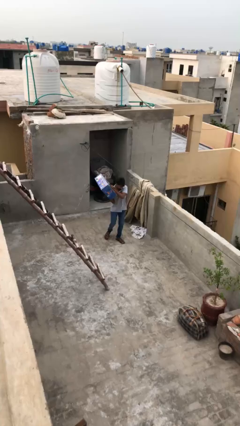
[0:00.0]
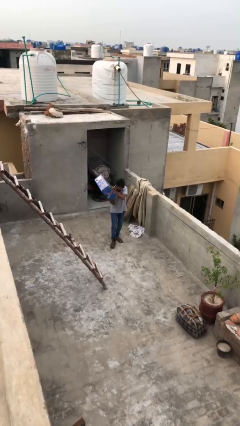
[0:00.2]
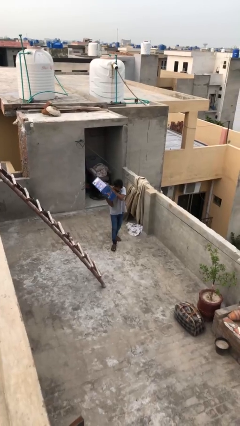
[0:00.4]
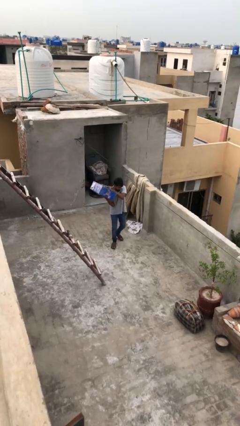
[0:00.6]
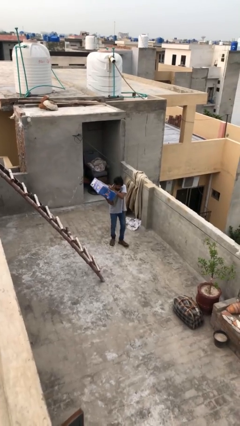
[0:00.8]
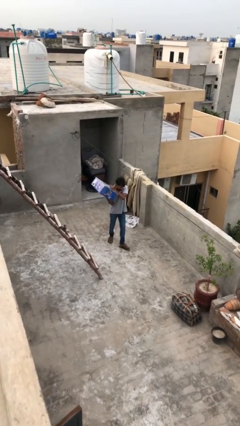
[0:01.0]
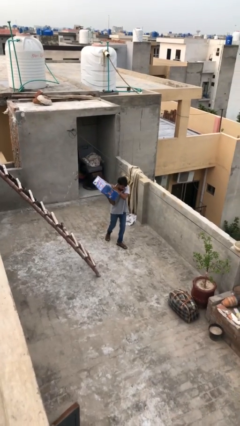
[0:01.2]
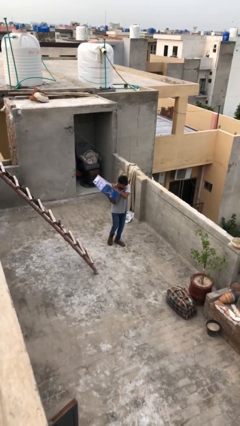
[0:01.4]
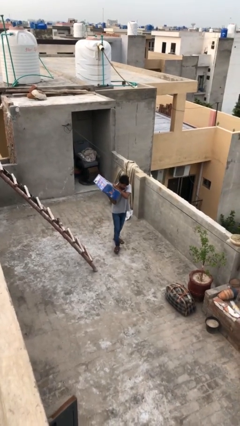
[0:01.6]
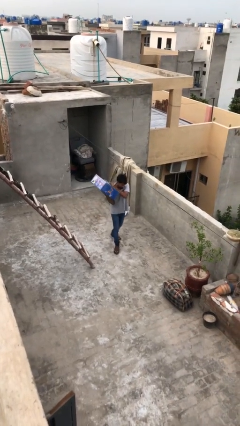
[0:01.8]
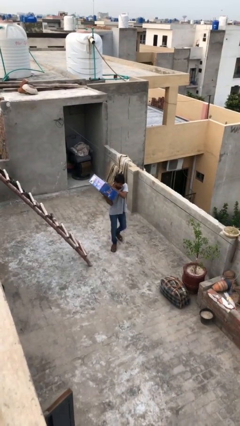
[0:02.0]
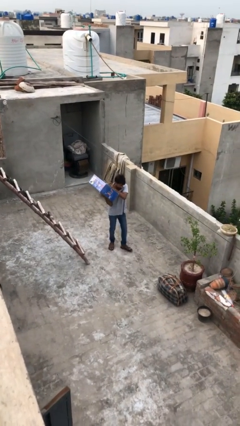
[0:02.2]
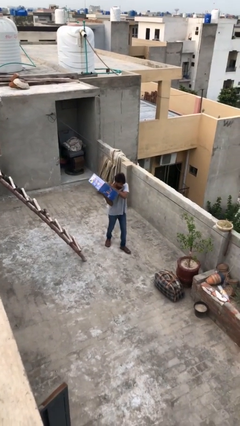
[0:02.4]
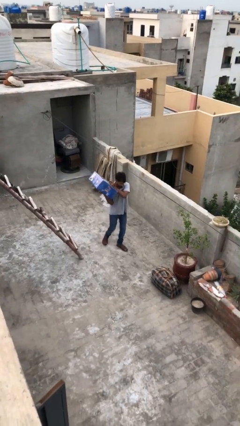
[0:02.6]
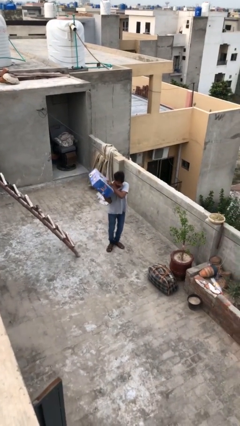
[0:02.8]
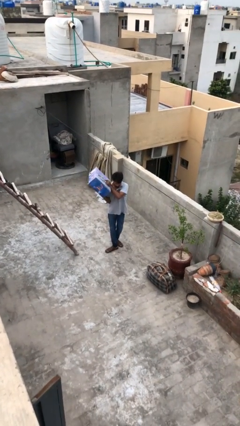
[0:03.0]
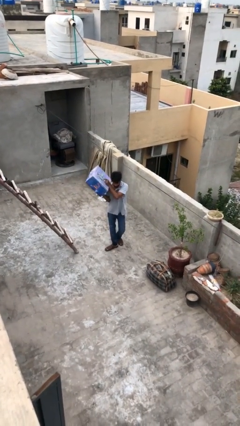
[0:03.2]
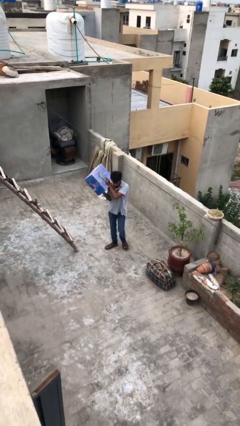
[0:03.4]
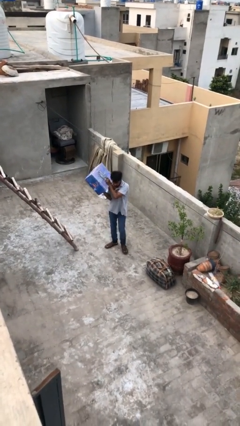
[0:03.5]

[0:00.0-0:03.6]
person carries heavy object

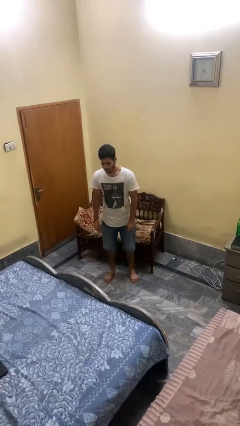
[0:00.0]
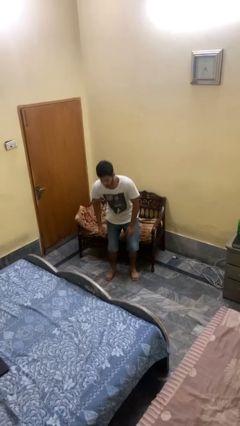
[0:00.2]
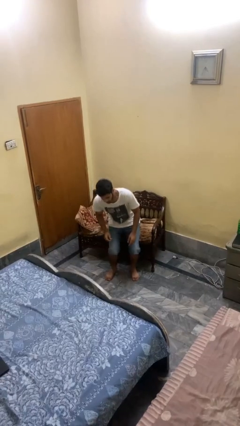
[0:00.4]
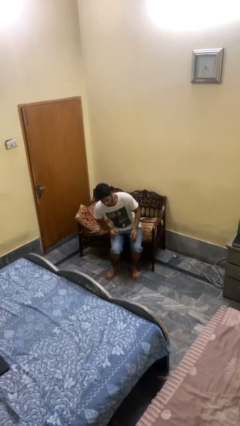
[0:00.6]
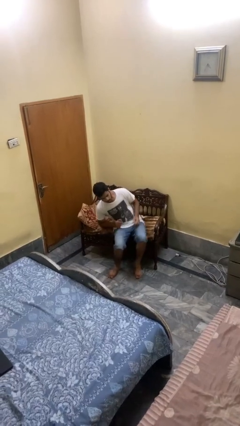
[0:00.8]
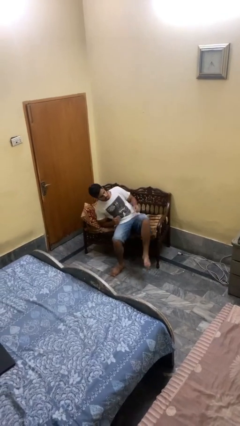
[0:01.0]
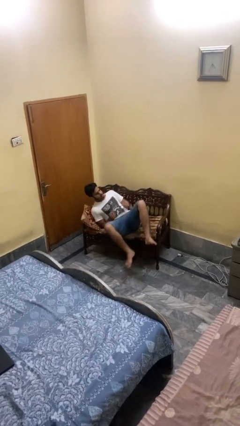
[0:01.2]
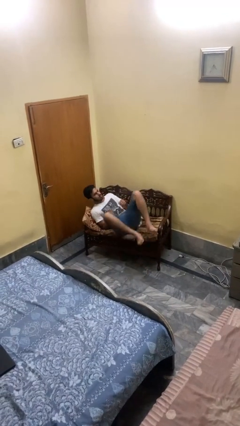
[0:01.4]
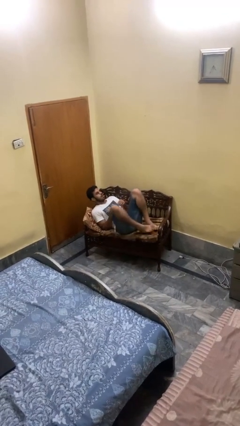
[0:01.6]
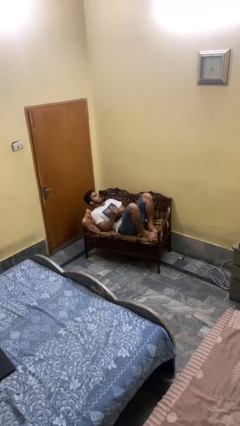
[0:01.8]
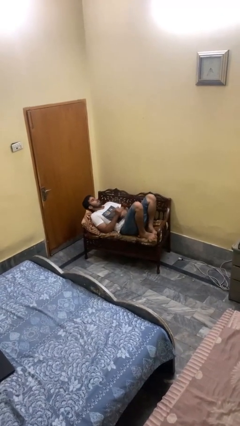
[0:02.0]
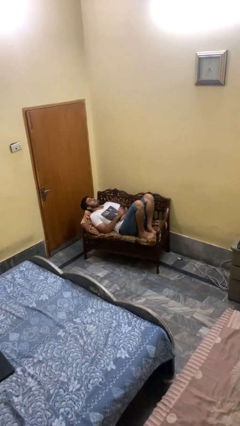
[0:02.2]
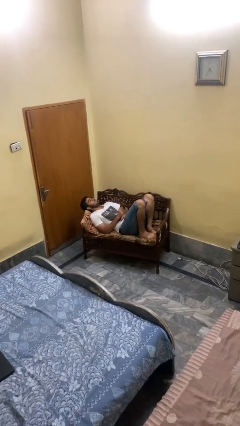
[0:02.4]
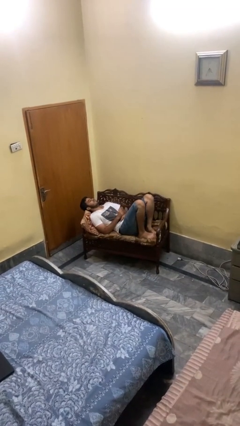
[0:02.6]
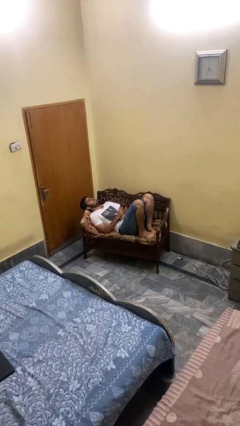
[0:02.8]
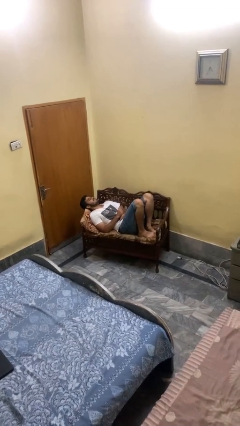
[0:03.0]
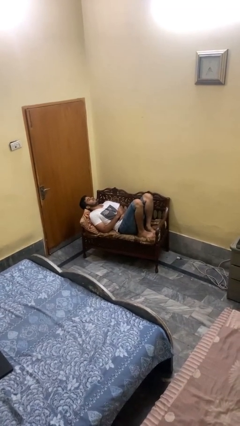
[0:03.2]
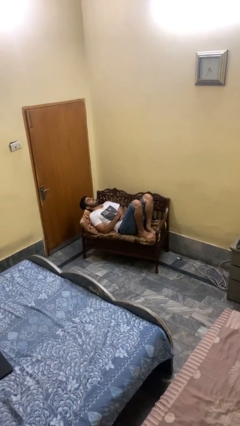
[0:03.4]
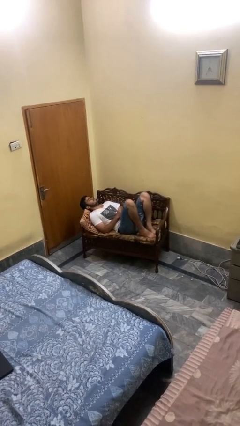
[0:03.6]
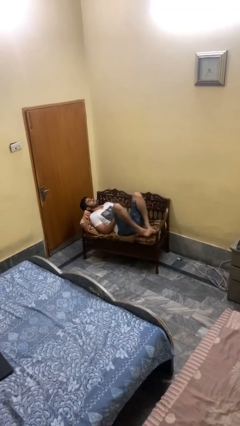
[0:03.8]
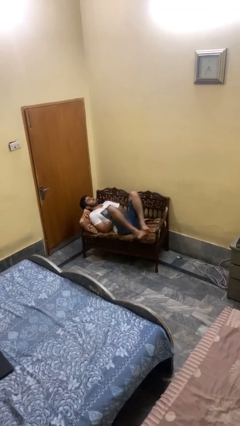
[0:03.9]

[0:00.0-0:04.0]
person lies down on couch

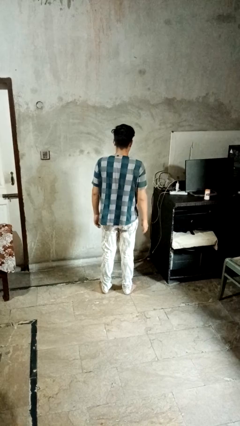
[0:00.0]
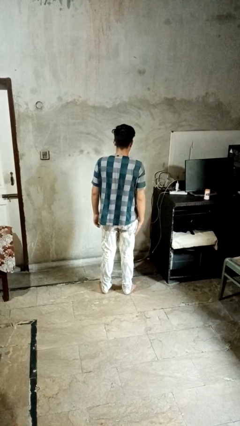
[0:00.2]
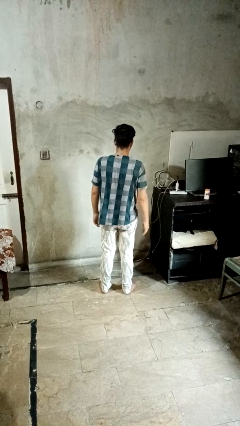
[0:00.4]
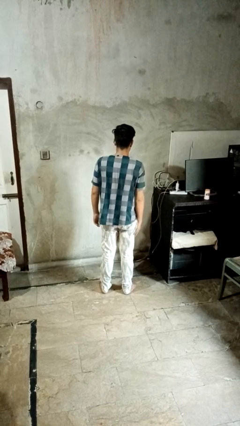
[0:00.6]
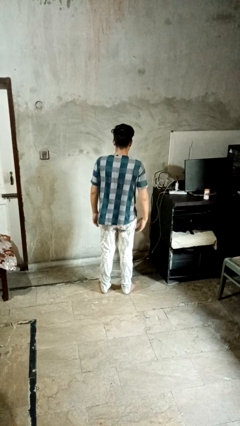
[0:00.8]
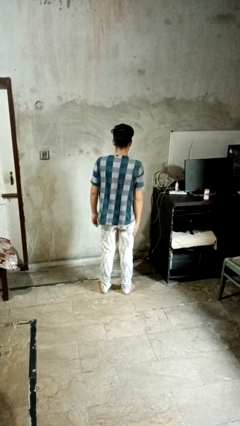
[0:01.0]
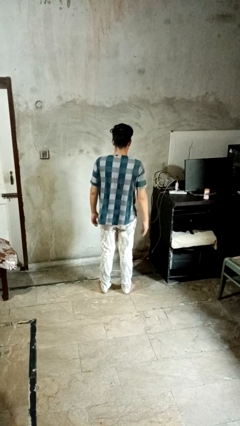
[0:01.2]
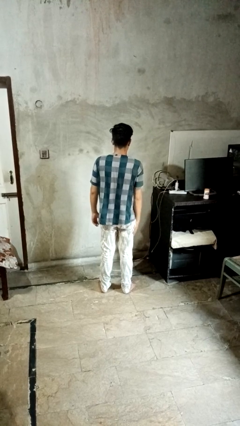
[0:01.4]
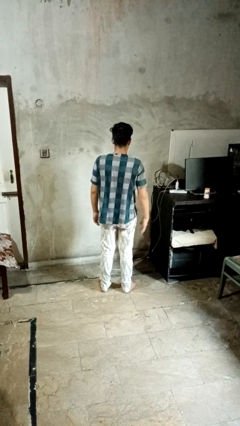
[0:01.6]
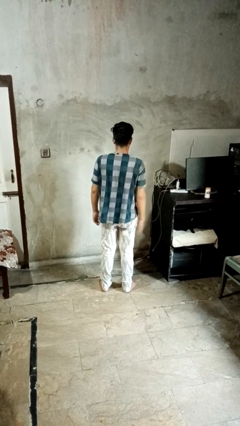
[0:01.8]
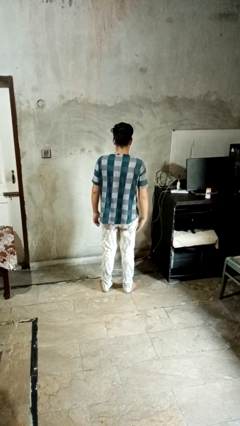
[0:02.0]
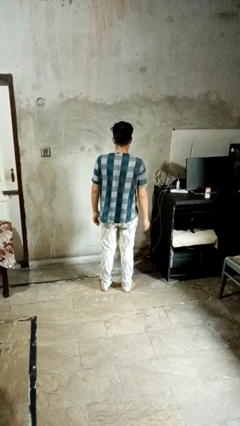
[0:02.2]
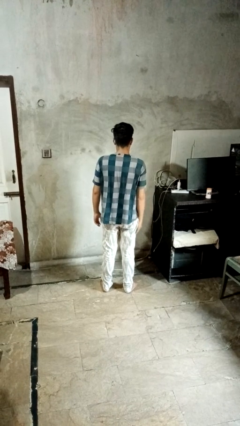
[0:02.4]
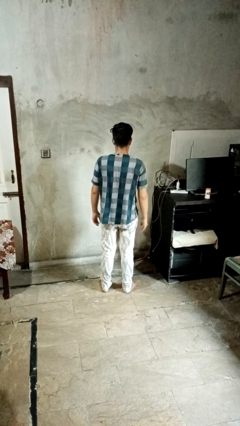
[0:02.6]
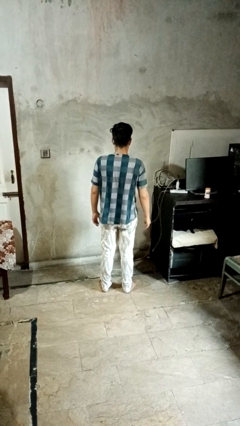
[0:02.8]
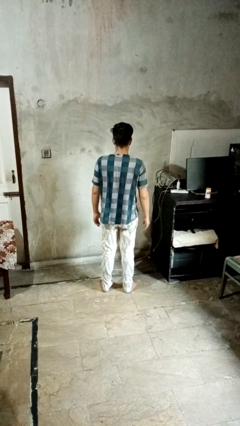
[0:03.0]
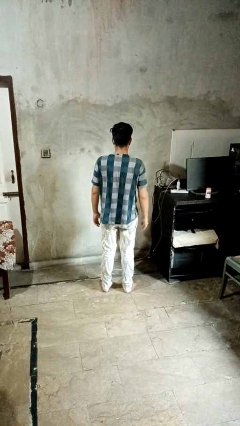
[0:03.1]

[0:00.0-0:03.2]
person slaps hands on thighs

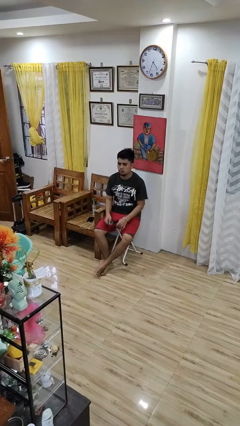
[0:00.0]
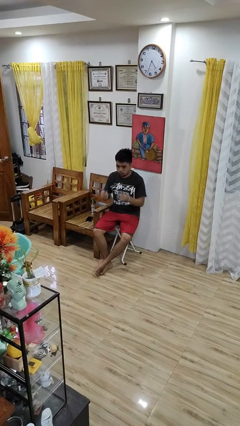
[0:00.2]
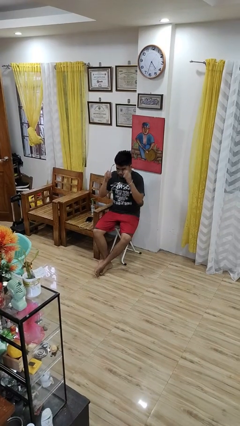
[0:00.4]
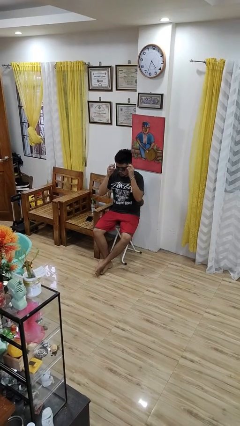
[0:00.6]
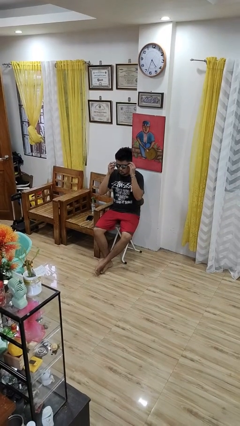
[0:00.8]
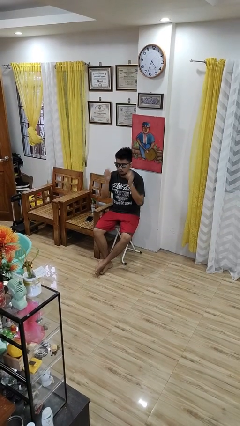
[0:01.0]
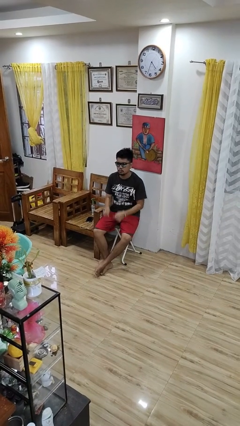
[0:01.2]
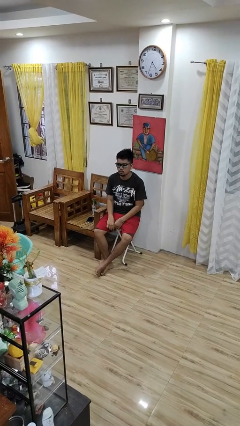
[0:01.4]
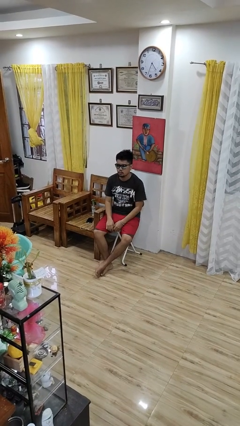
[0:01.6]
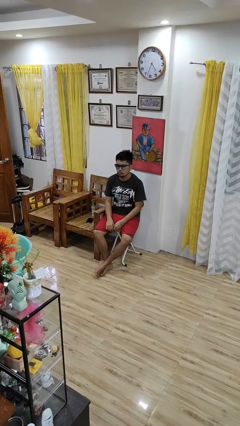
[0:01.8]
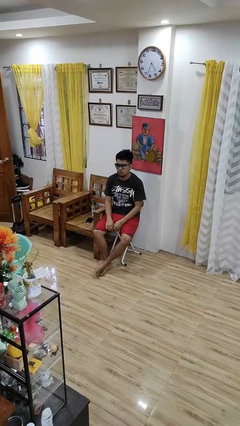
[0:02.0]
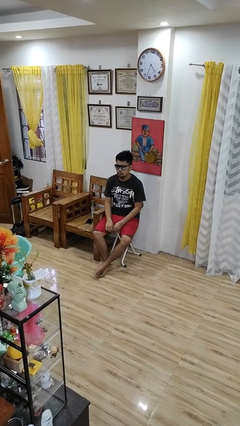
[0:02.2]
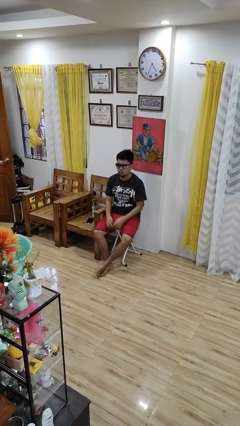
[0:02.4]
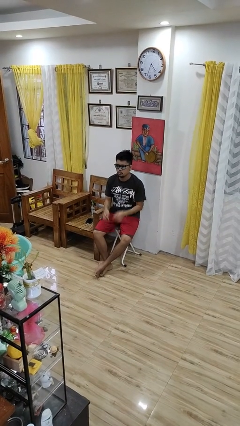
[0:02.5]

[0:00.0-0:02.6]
person puts on sunglasses

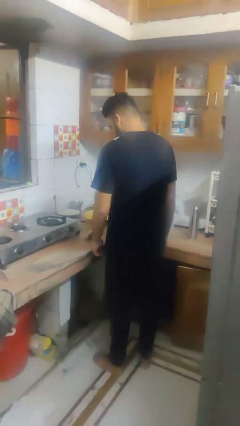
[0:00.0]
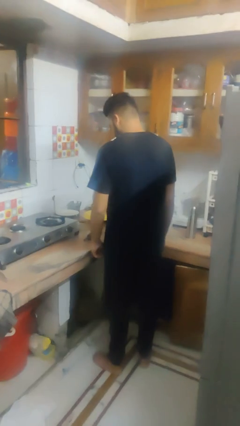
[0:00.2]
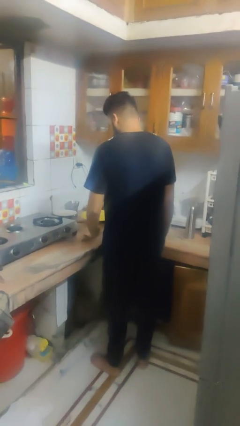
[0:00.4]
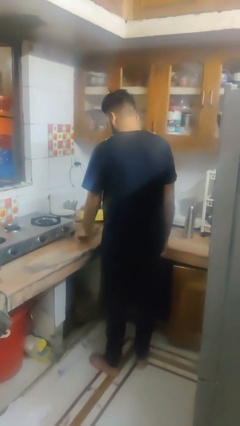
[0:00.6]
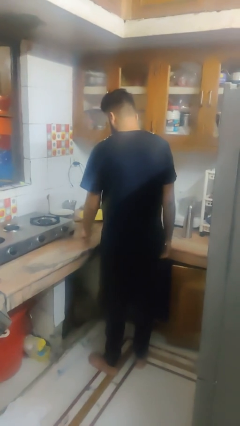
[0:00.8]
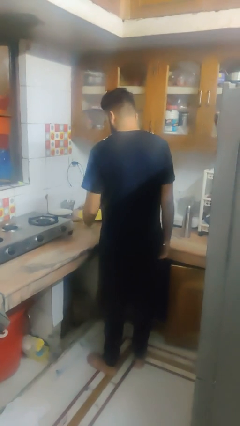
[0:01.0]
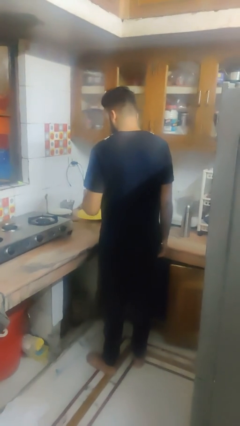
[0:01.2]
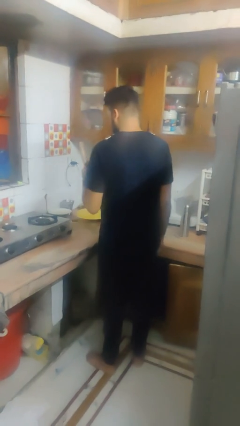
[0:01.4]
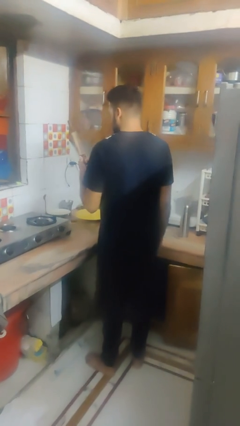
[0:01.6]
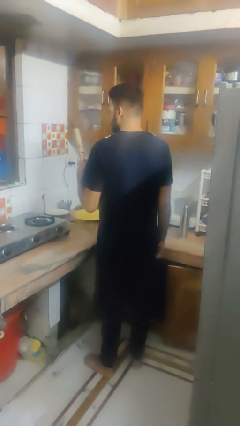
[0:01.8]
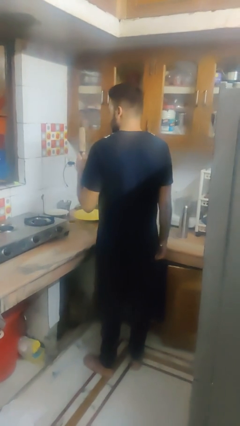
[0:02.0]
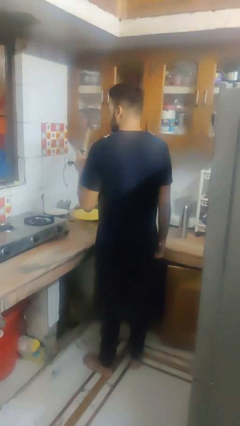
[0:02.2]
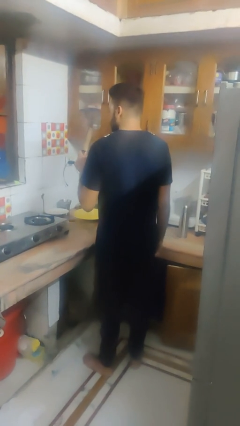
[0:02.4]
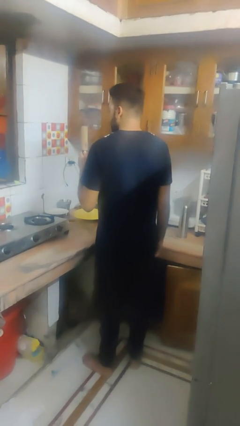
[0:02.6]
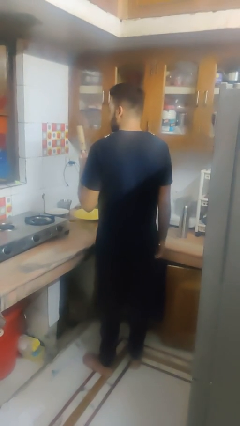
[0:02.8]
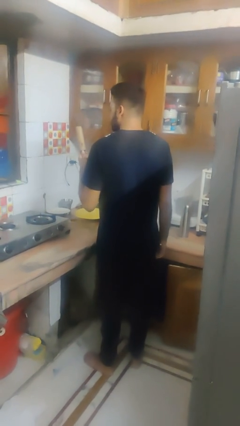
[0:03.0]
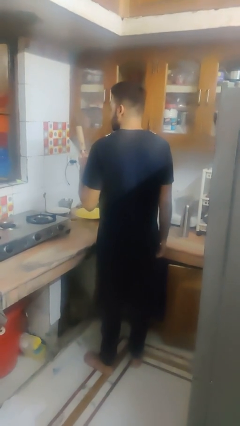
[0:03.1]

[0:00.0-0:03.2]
person picks up object from cabinet

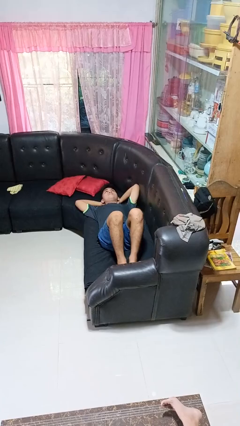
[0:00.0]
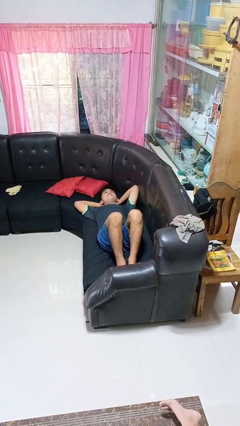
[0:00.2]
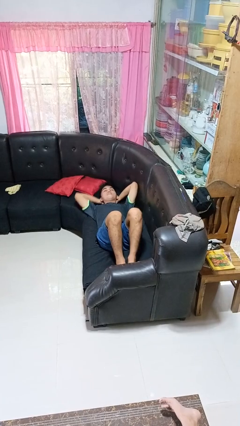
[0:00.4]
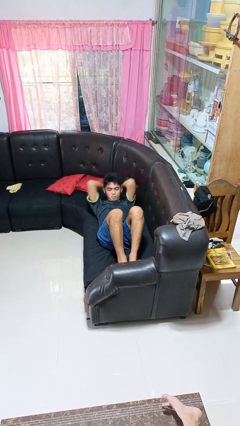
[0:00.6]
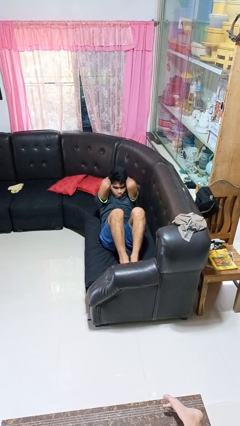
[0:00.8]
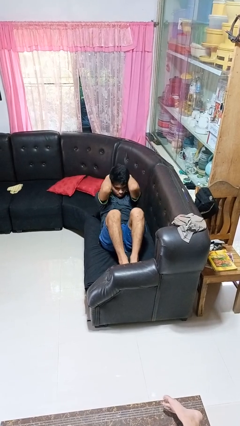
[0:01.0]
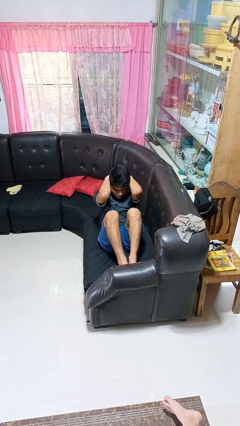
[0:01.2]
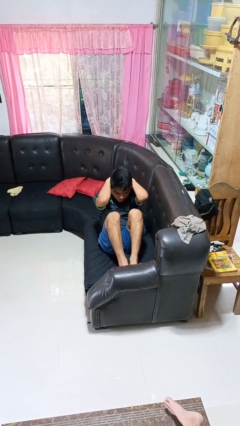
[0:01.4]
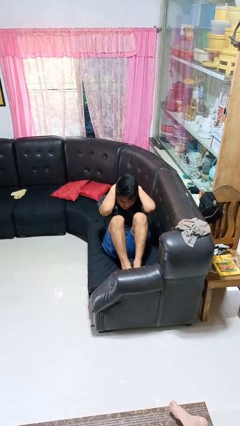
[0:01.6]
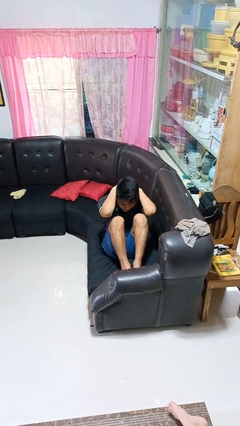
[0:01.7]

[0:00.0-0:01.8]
person exercises with situp
